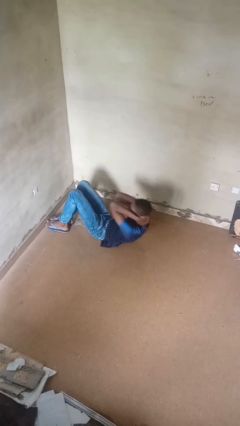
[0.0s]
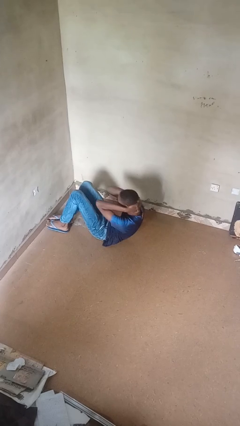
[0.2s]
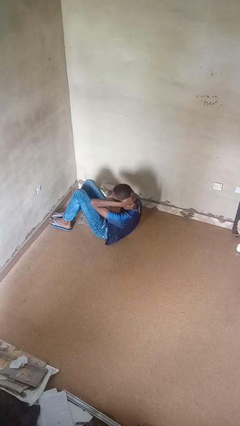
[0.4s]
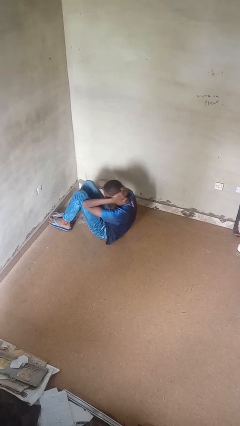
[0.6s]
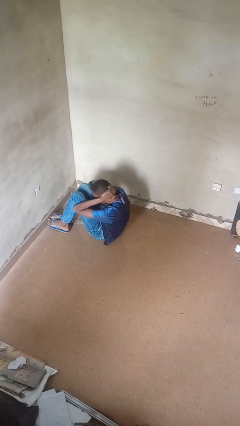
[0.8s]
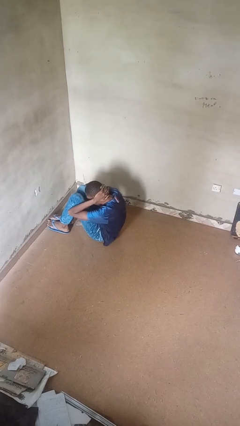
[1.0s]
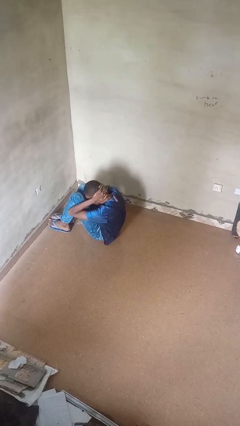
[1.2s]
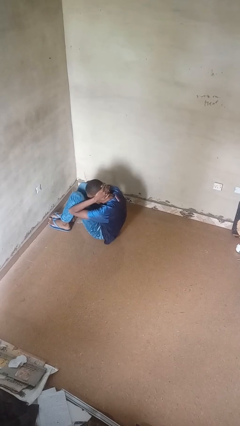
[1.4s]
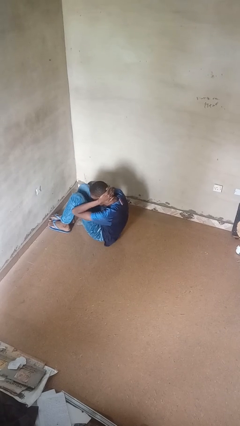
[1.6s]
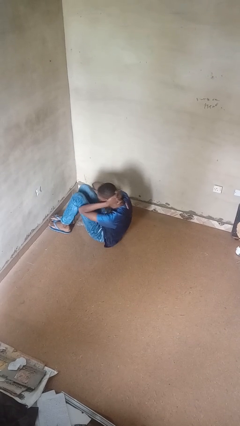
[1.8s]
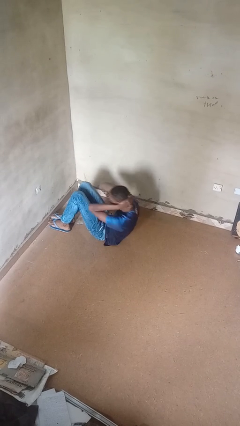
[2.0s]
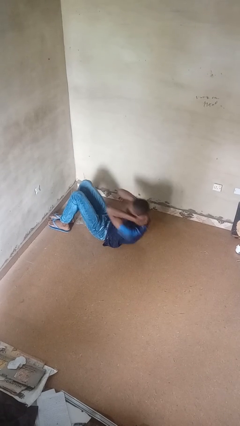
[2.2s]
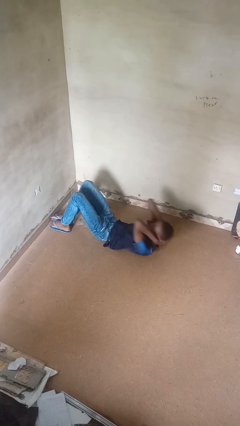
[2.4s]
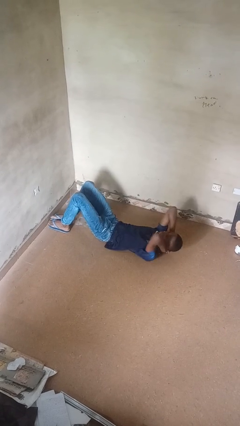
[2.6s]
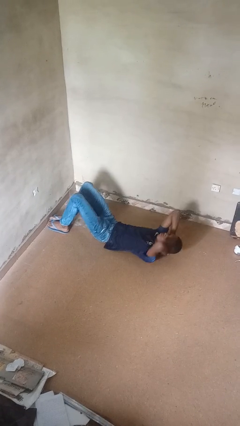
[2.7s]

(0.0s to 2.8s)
person exercises with situp

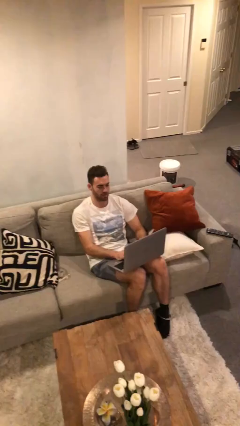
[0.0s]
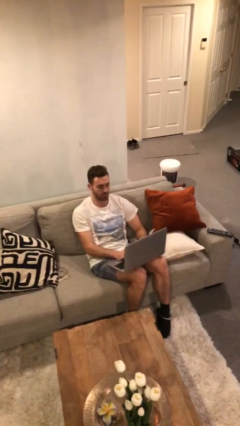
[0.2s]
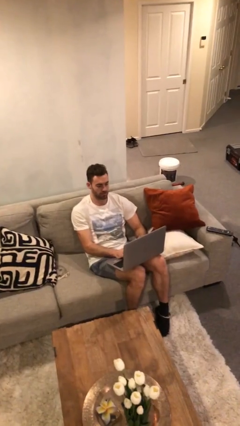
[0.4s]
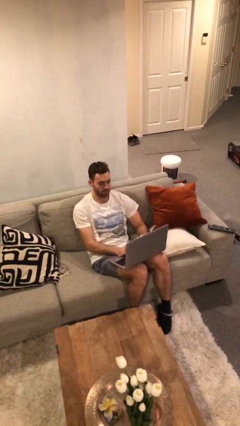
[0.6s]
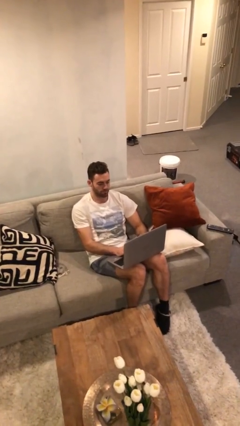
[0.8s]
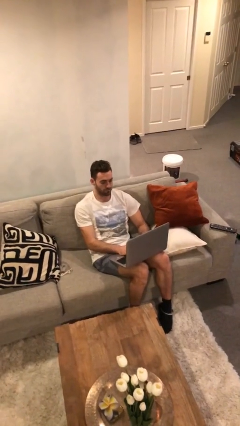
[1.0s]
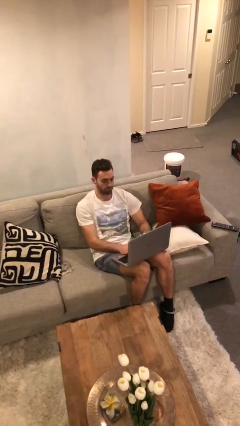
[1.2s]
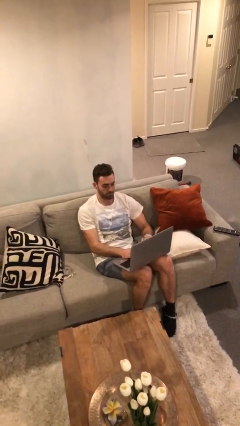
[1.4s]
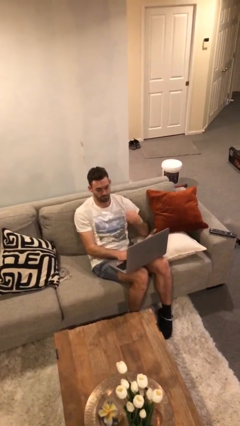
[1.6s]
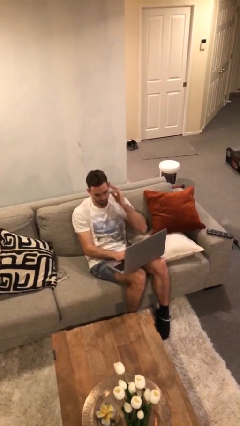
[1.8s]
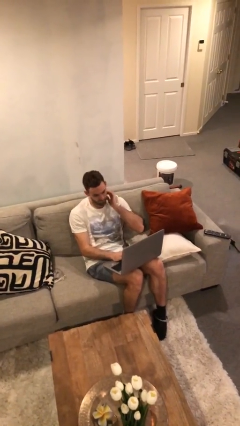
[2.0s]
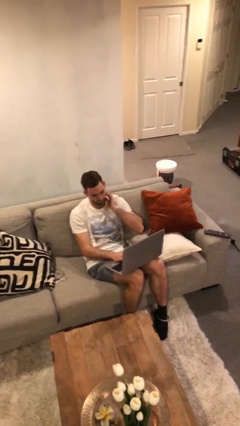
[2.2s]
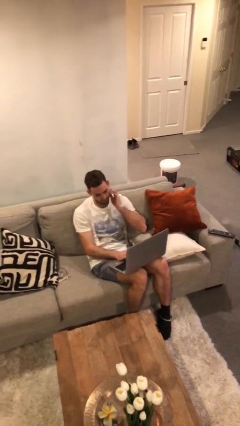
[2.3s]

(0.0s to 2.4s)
person interacts with laptop

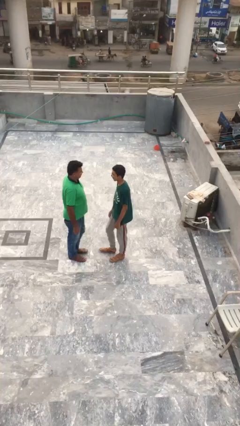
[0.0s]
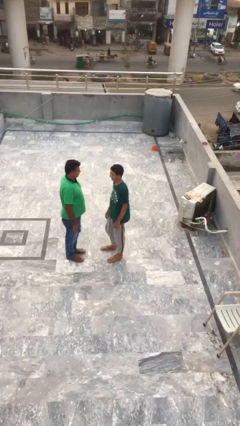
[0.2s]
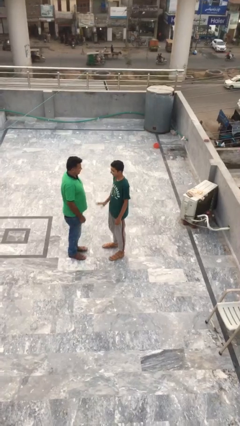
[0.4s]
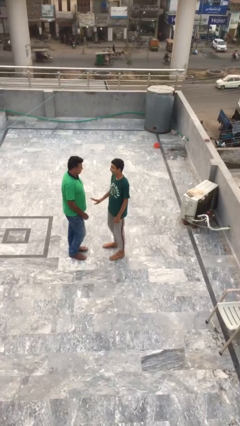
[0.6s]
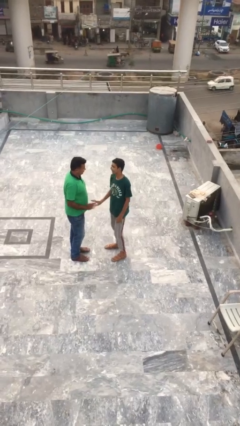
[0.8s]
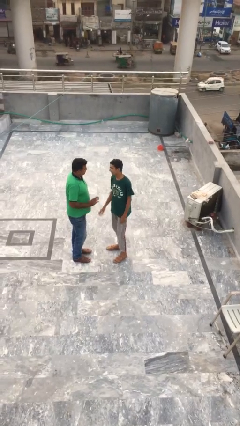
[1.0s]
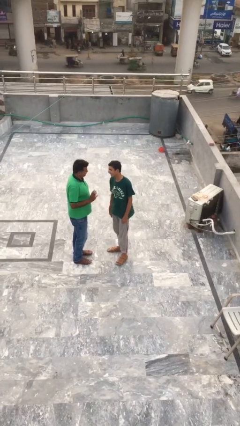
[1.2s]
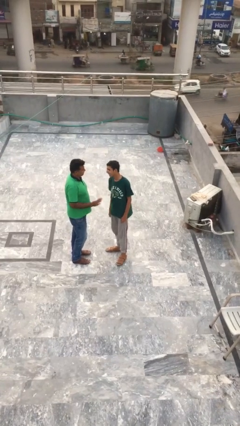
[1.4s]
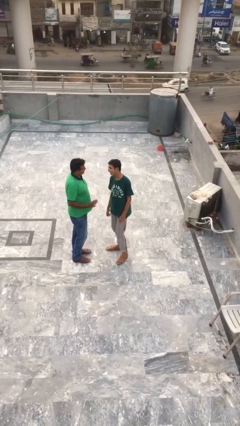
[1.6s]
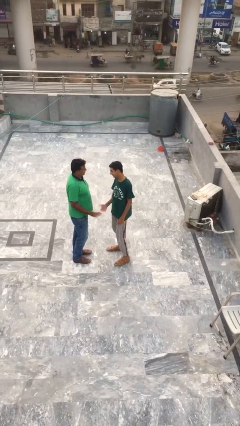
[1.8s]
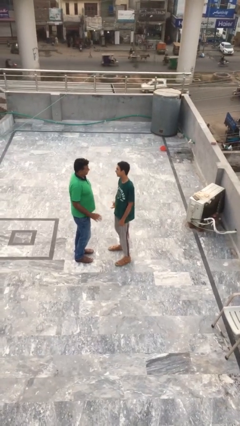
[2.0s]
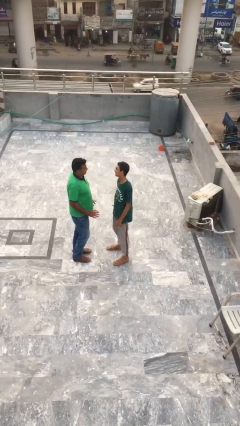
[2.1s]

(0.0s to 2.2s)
person talks to person

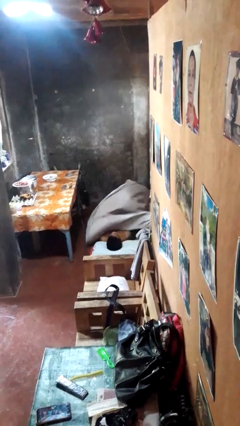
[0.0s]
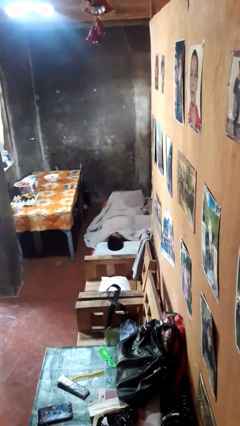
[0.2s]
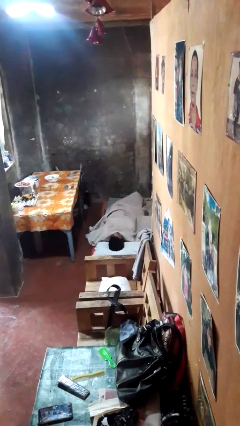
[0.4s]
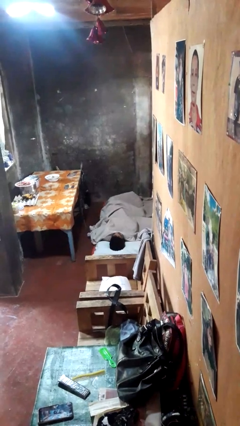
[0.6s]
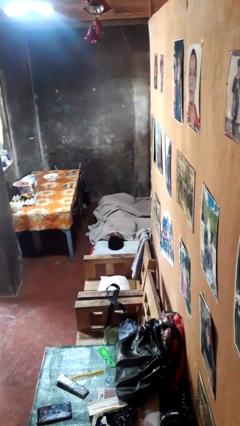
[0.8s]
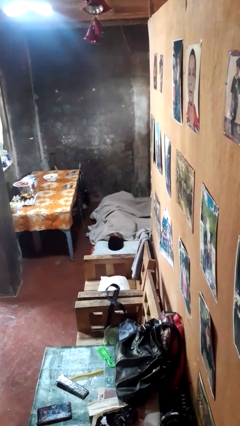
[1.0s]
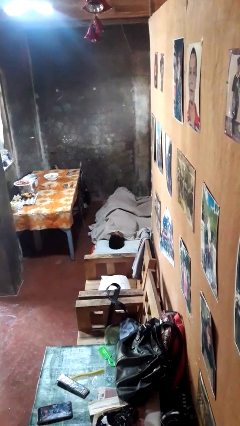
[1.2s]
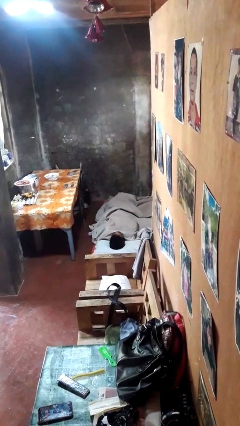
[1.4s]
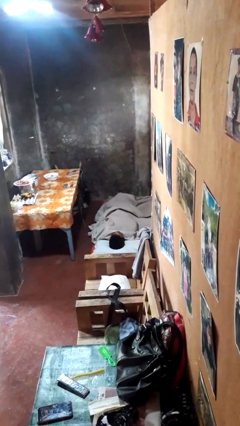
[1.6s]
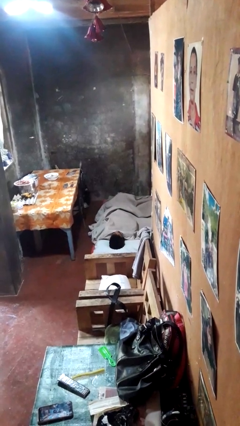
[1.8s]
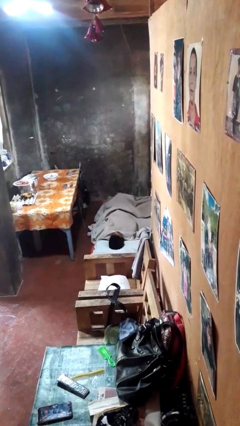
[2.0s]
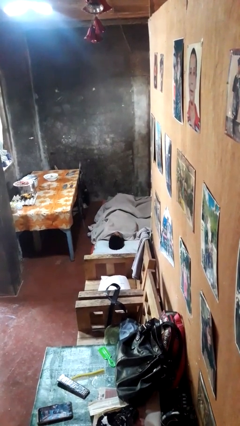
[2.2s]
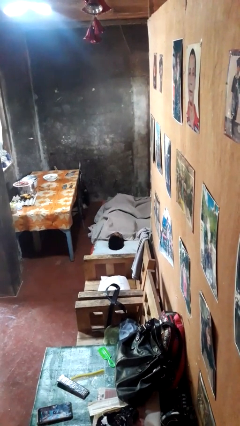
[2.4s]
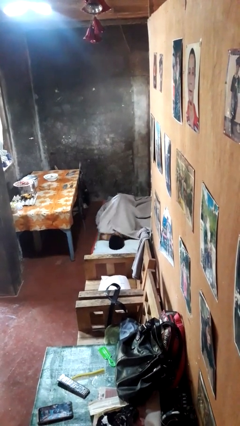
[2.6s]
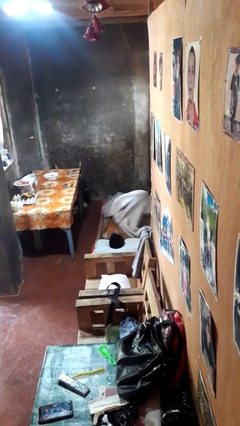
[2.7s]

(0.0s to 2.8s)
person covers with bedsheets

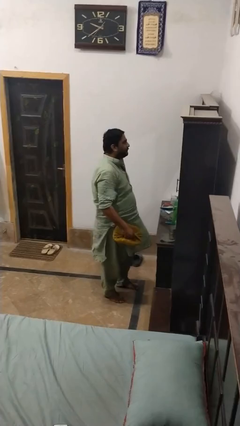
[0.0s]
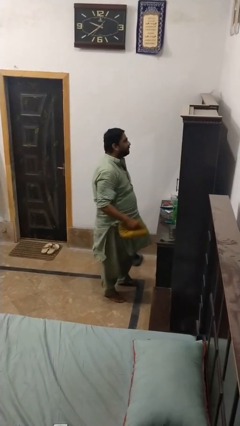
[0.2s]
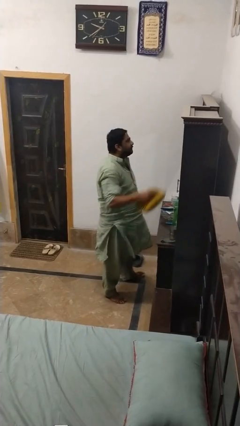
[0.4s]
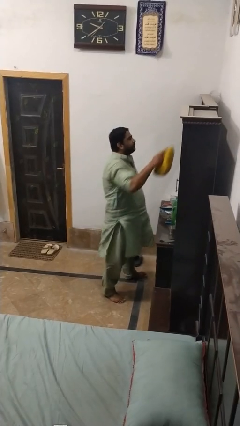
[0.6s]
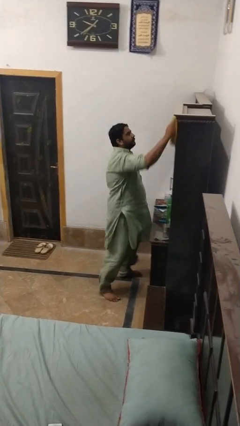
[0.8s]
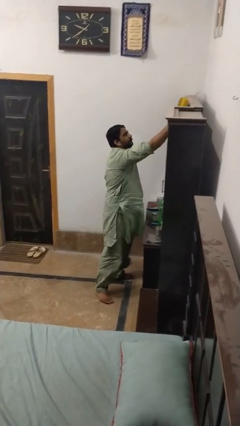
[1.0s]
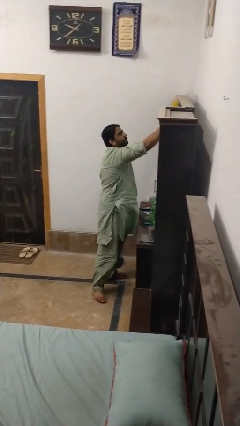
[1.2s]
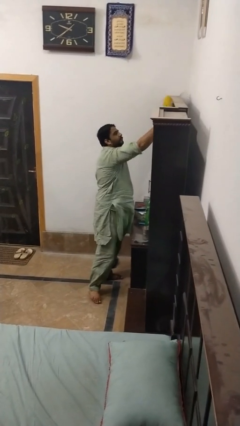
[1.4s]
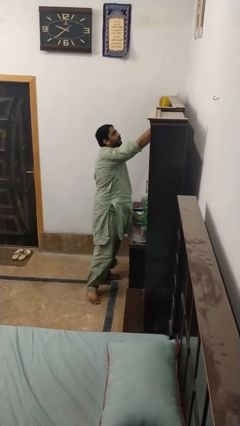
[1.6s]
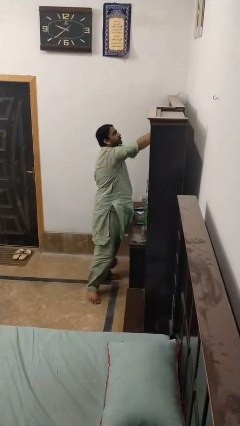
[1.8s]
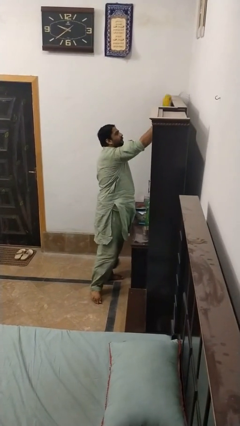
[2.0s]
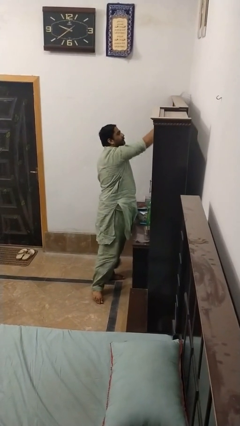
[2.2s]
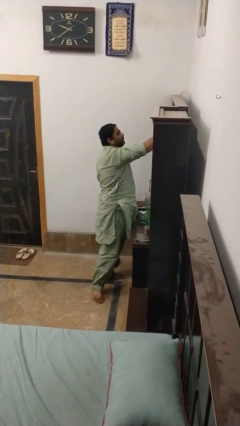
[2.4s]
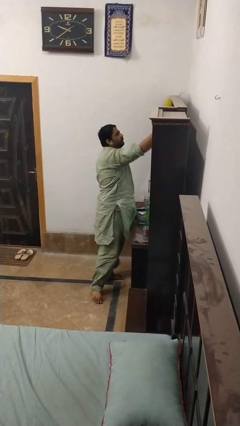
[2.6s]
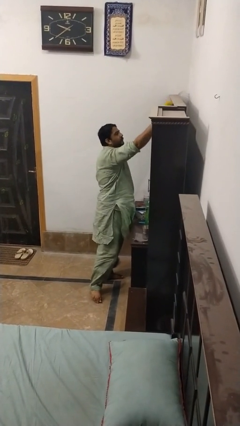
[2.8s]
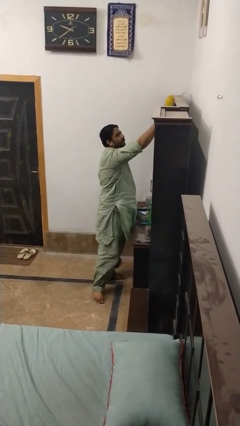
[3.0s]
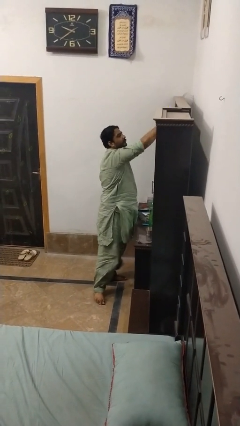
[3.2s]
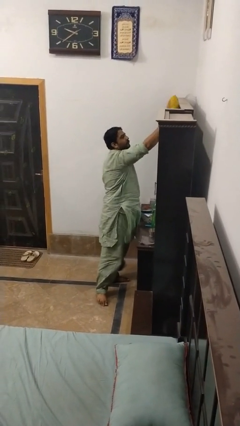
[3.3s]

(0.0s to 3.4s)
person dusts furniture

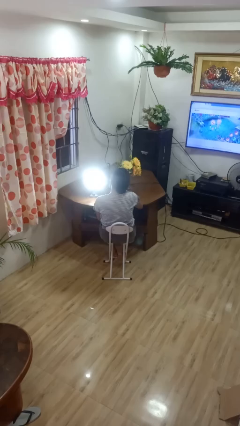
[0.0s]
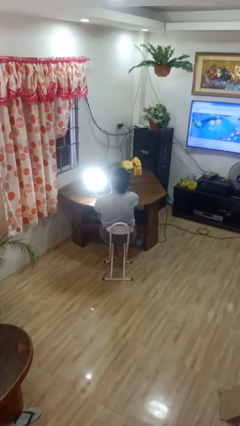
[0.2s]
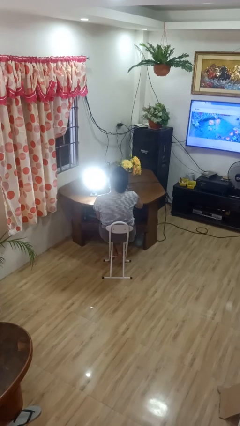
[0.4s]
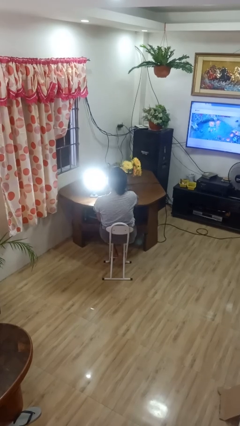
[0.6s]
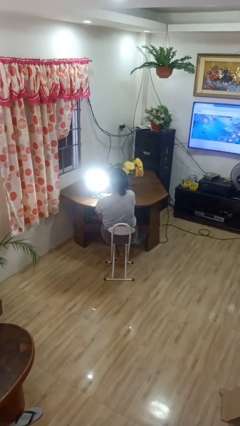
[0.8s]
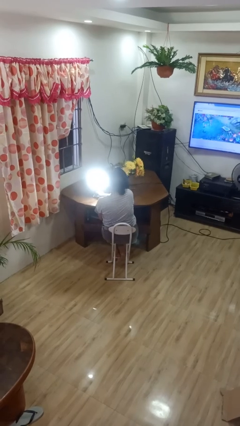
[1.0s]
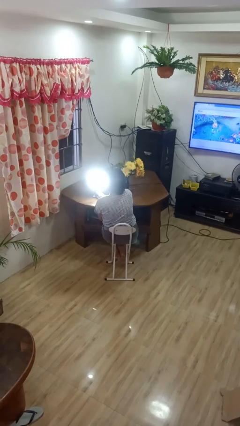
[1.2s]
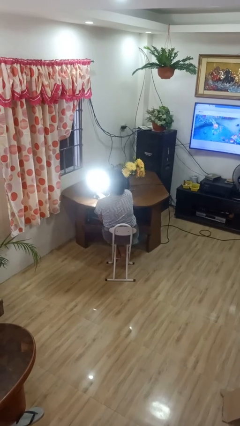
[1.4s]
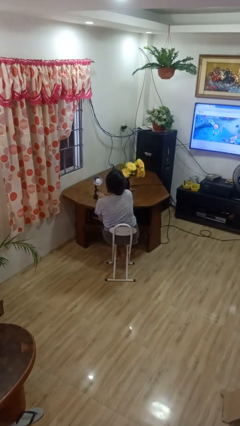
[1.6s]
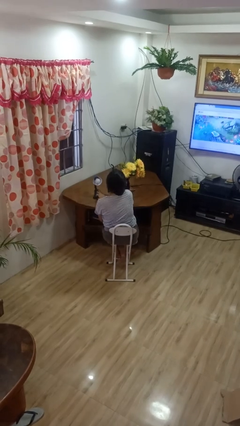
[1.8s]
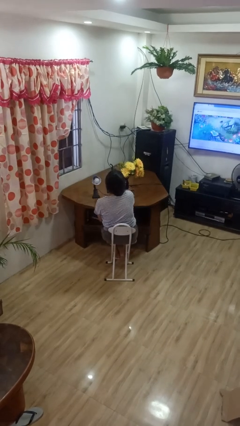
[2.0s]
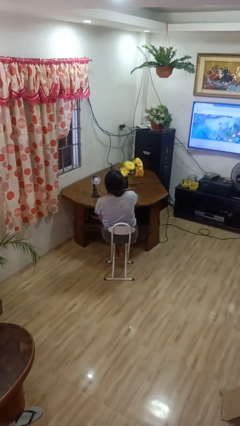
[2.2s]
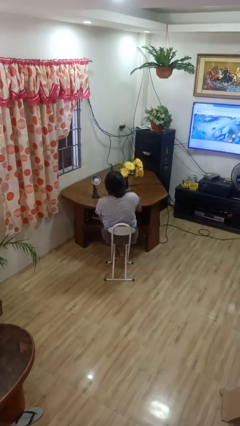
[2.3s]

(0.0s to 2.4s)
person turns off lamp

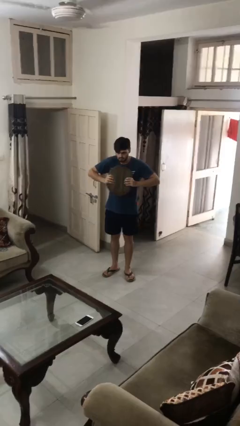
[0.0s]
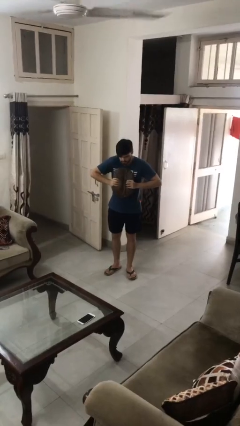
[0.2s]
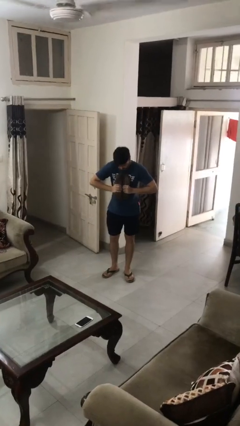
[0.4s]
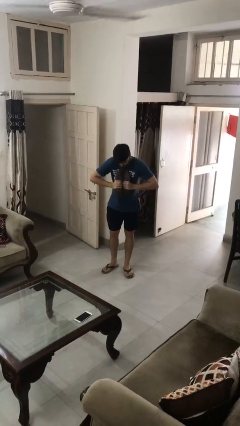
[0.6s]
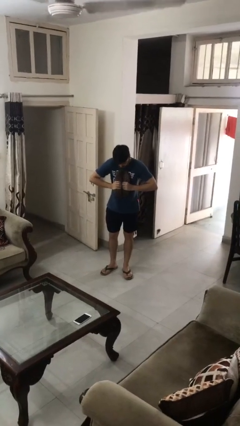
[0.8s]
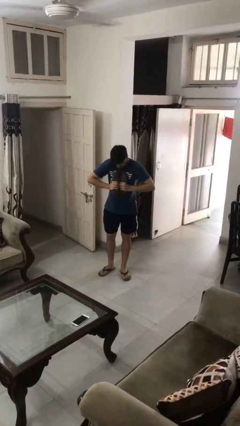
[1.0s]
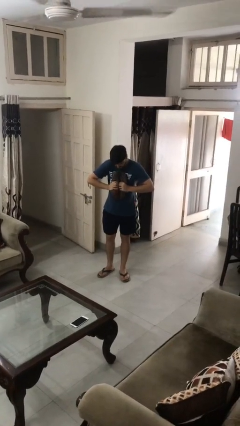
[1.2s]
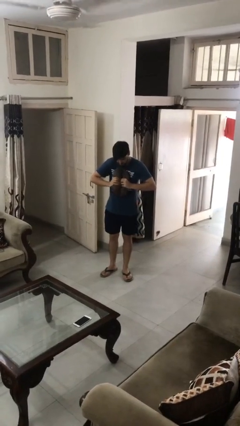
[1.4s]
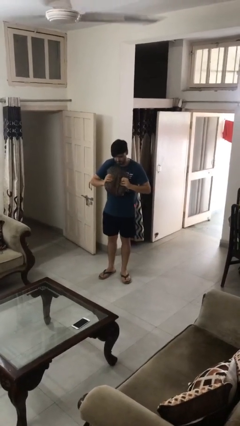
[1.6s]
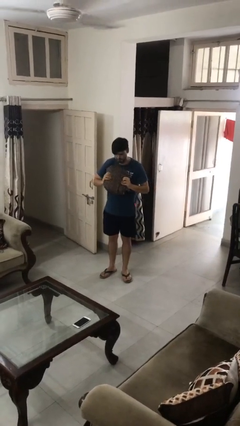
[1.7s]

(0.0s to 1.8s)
person squeezes object
